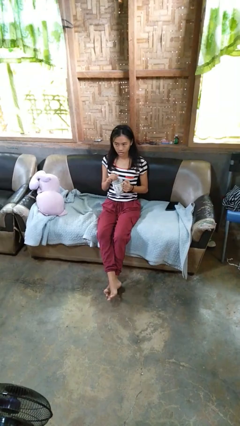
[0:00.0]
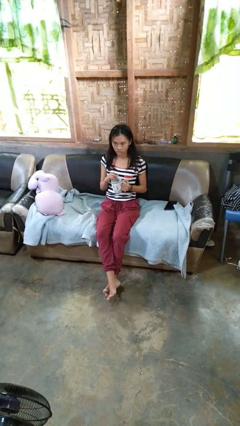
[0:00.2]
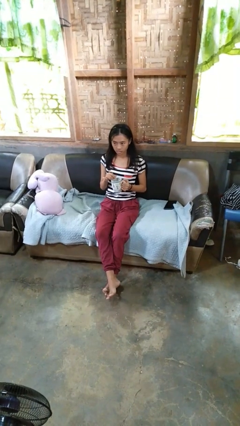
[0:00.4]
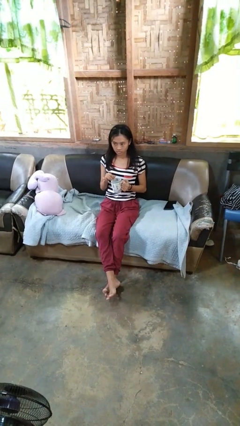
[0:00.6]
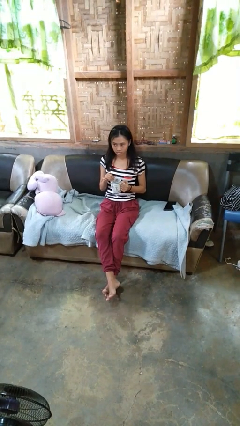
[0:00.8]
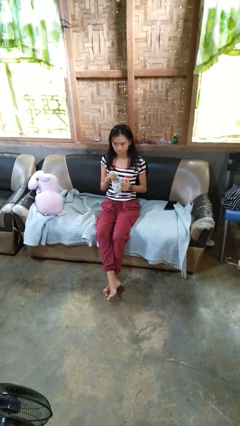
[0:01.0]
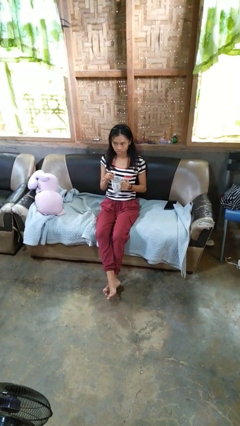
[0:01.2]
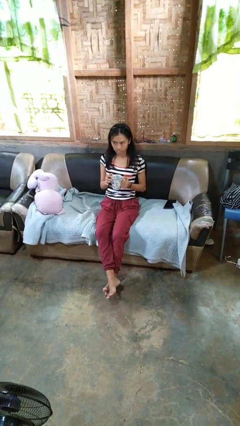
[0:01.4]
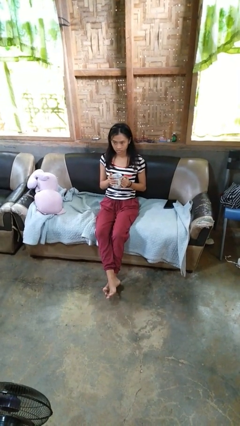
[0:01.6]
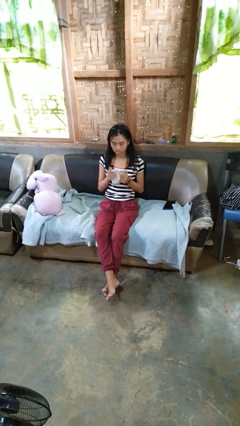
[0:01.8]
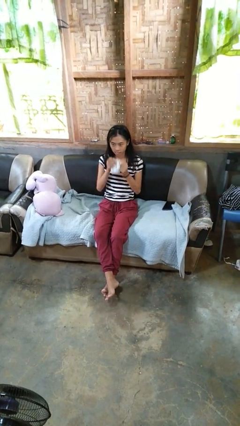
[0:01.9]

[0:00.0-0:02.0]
person stirs mug

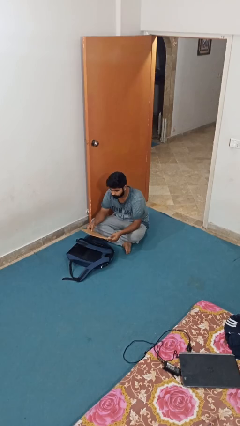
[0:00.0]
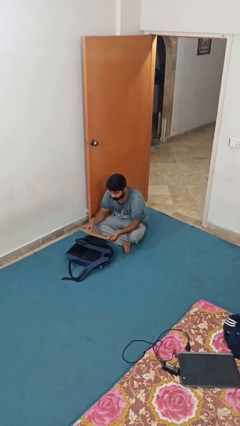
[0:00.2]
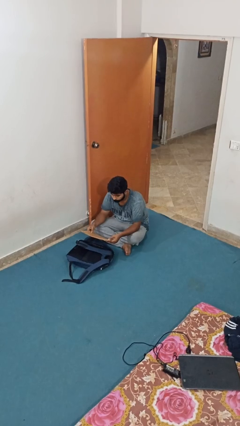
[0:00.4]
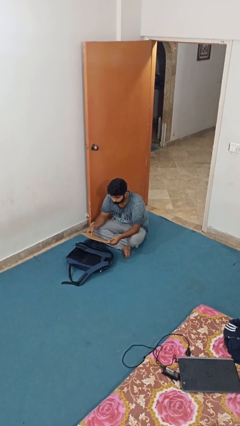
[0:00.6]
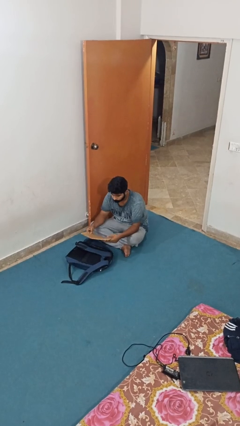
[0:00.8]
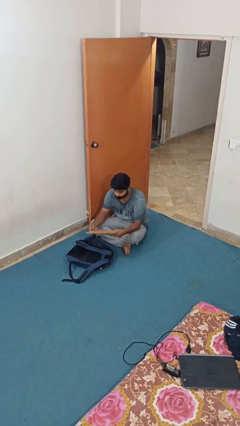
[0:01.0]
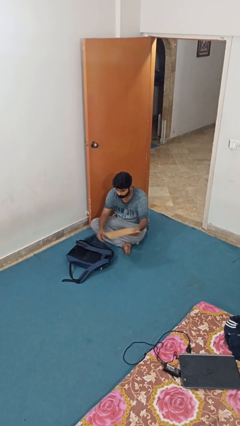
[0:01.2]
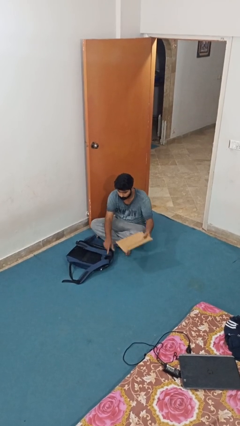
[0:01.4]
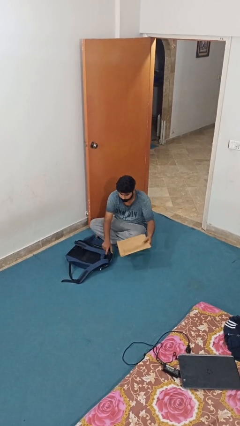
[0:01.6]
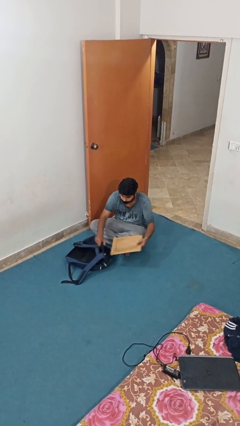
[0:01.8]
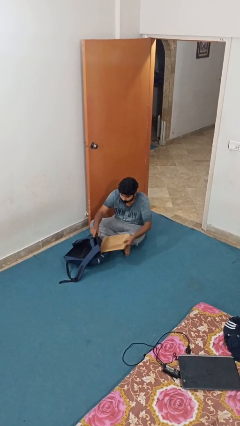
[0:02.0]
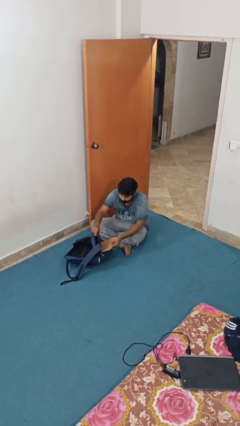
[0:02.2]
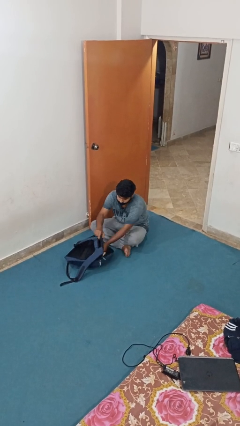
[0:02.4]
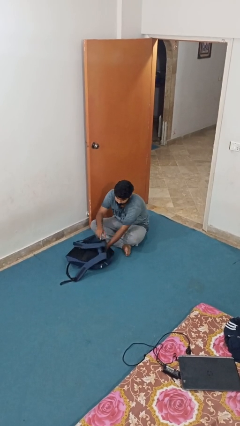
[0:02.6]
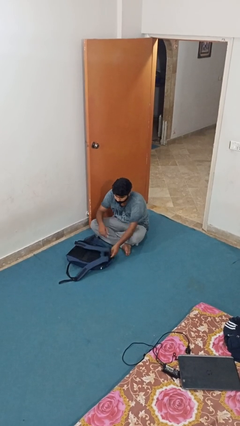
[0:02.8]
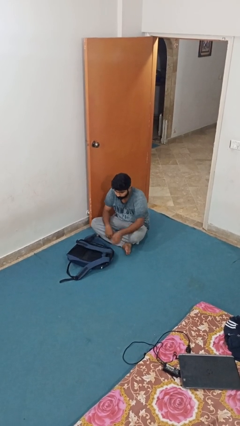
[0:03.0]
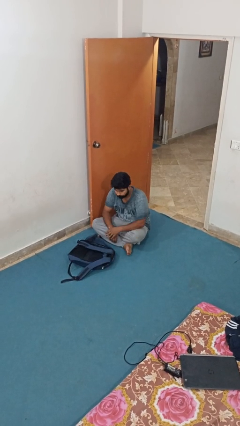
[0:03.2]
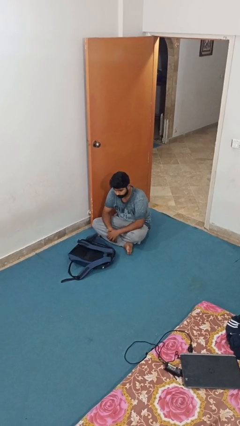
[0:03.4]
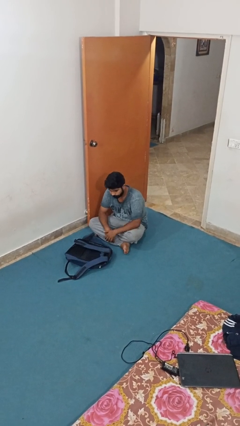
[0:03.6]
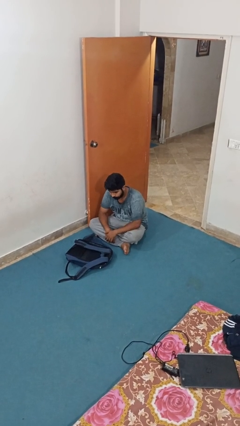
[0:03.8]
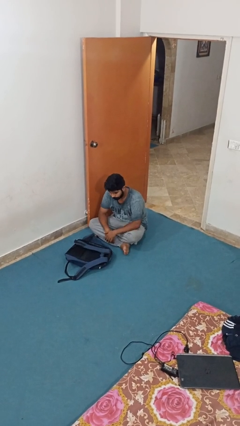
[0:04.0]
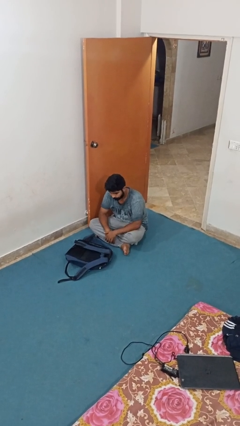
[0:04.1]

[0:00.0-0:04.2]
person puts object into backpack

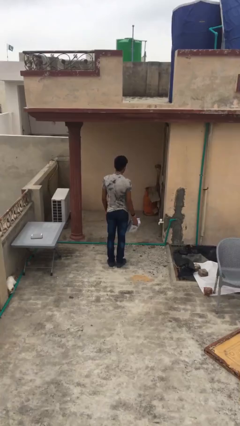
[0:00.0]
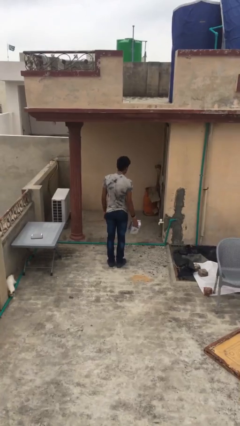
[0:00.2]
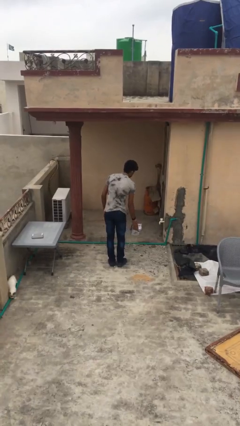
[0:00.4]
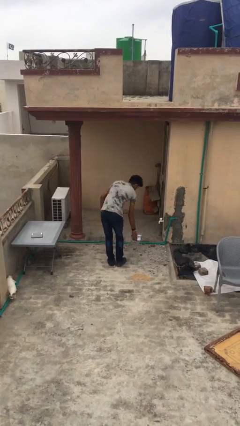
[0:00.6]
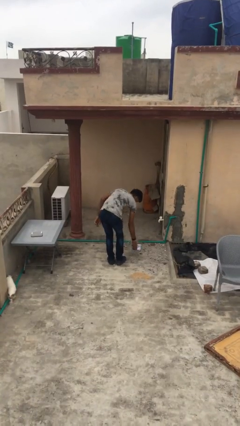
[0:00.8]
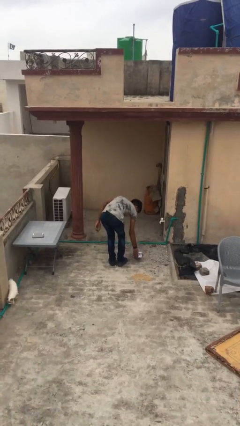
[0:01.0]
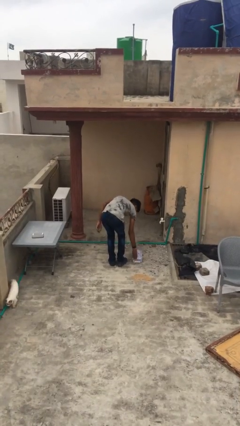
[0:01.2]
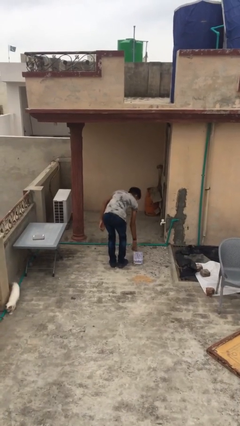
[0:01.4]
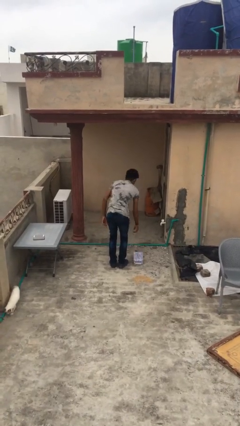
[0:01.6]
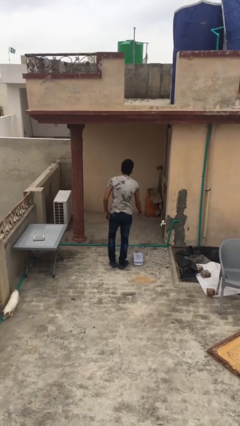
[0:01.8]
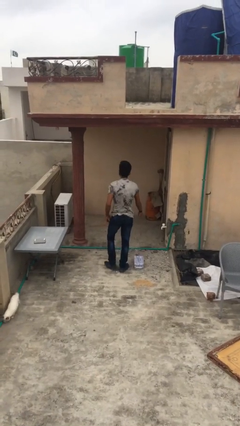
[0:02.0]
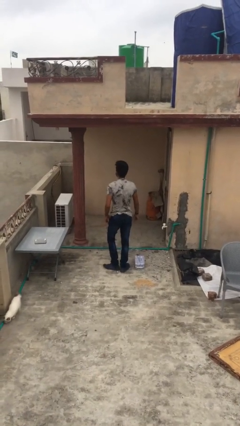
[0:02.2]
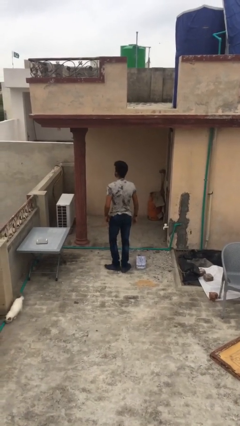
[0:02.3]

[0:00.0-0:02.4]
person puts down object on floor

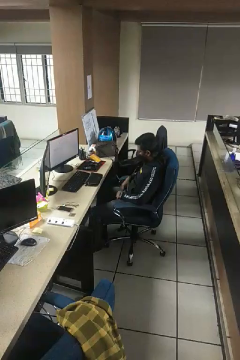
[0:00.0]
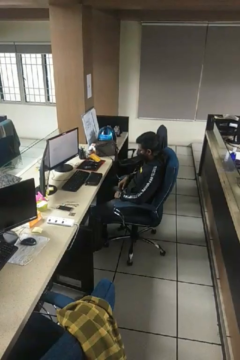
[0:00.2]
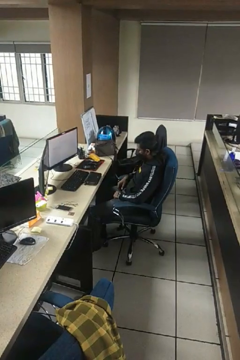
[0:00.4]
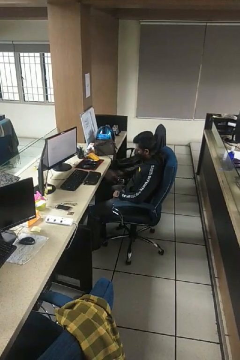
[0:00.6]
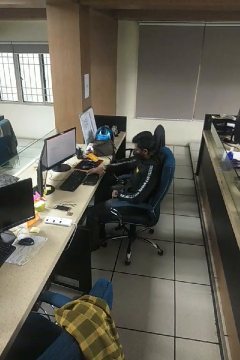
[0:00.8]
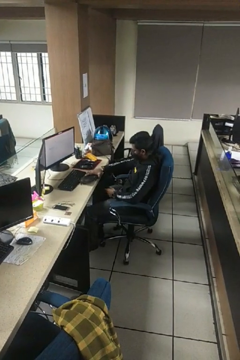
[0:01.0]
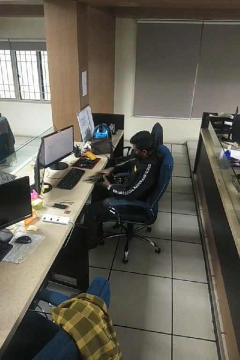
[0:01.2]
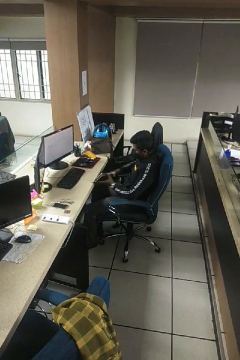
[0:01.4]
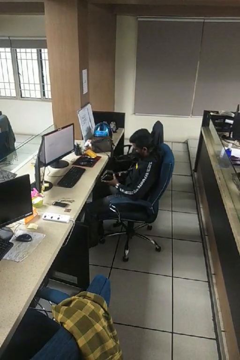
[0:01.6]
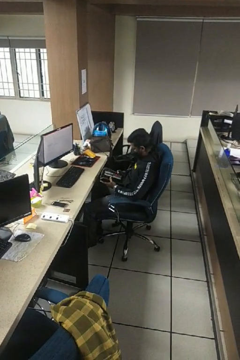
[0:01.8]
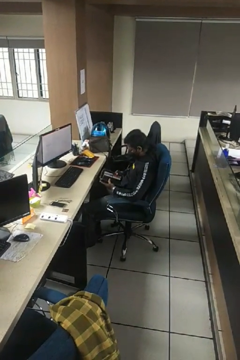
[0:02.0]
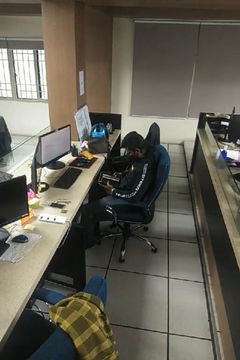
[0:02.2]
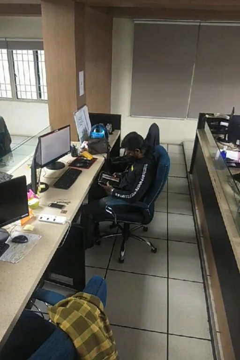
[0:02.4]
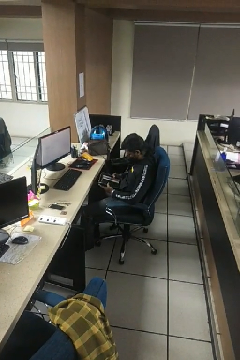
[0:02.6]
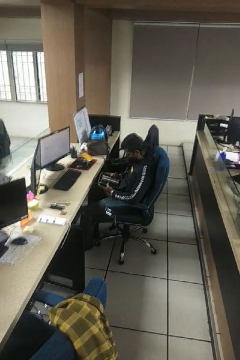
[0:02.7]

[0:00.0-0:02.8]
person searches in purse

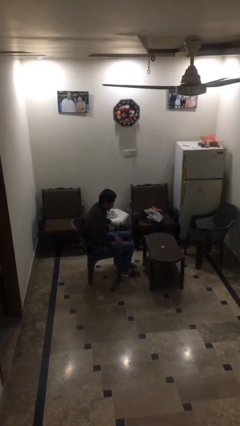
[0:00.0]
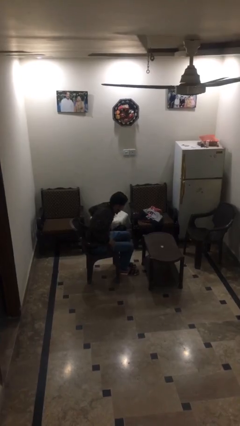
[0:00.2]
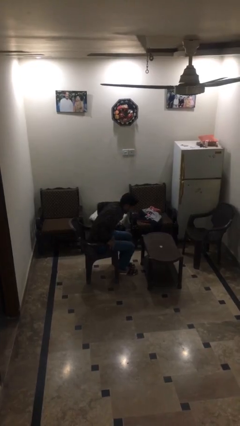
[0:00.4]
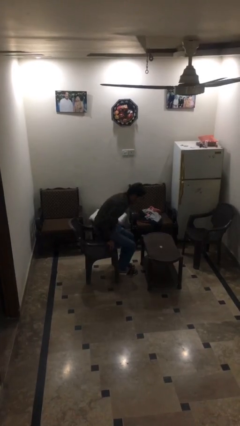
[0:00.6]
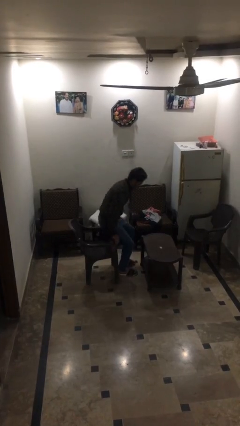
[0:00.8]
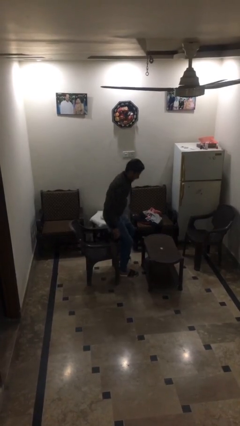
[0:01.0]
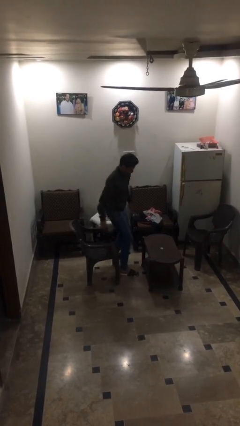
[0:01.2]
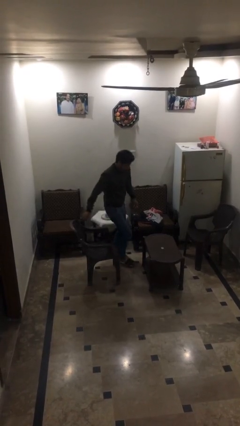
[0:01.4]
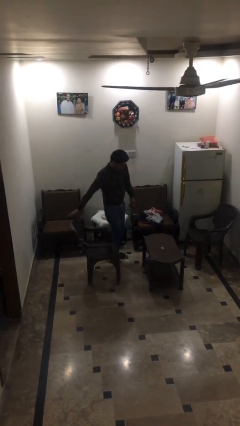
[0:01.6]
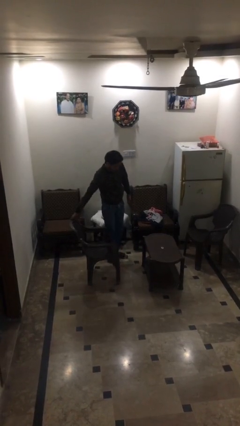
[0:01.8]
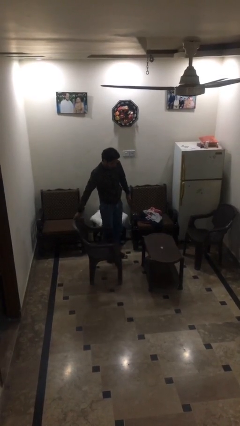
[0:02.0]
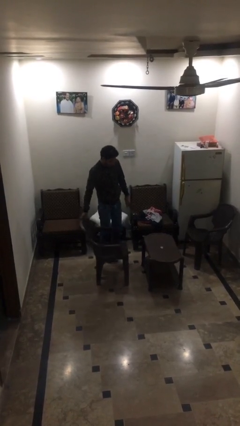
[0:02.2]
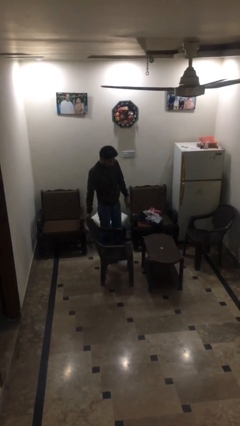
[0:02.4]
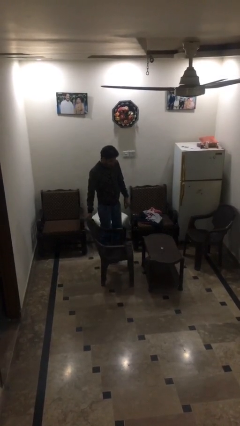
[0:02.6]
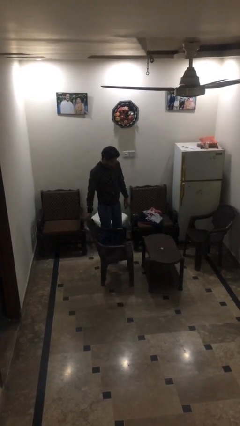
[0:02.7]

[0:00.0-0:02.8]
person stands up

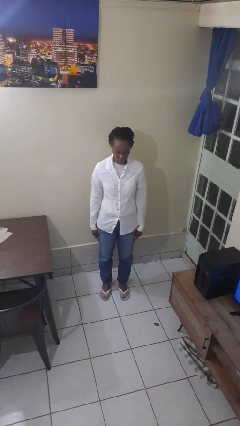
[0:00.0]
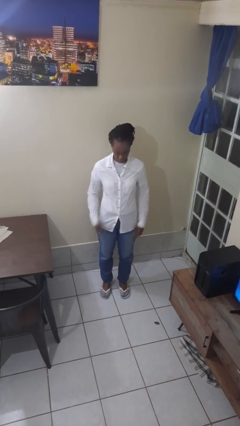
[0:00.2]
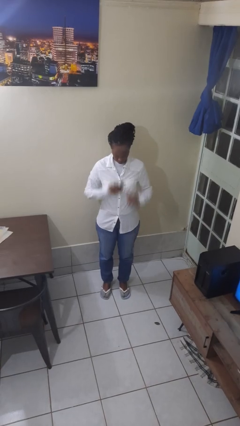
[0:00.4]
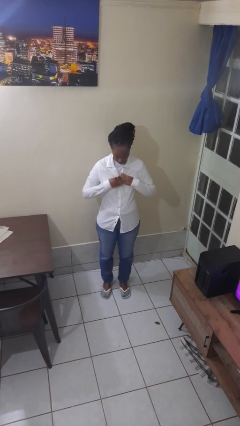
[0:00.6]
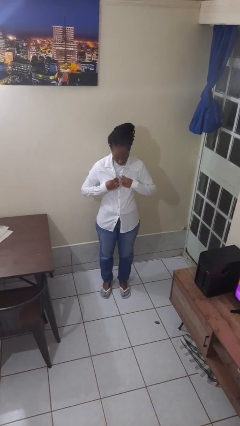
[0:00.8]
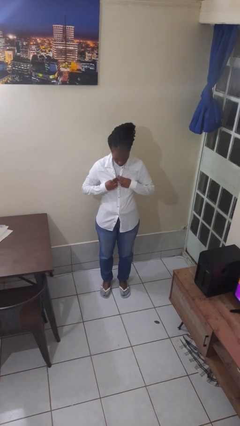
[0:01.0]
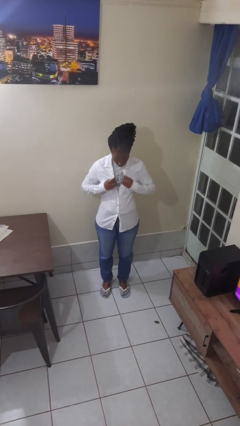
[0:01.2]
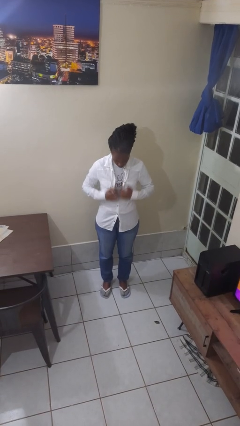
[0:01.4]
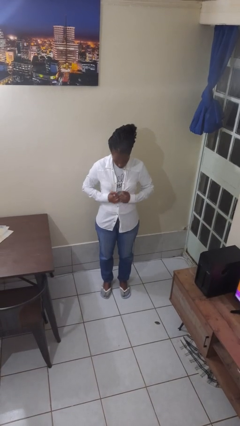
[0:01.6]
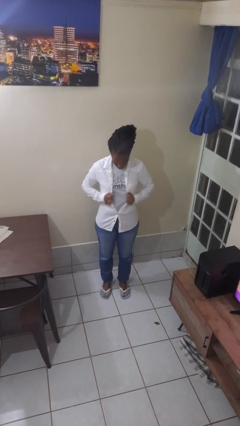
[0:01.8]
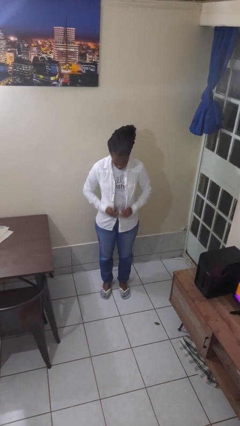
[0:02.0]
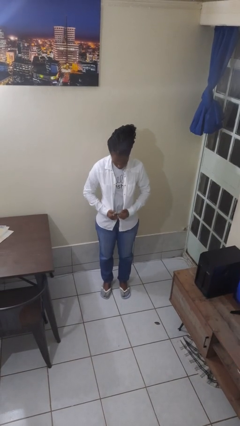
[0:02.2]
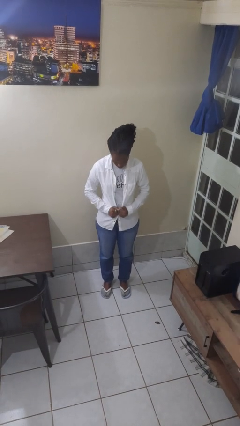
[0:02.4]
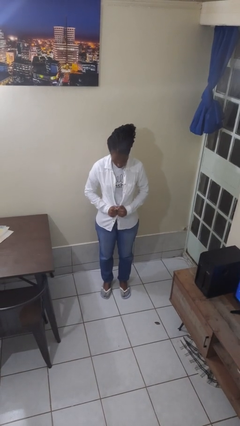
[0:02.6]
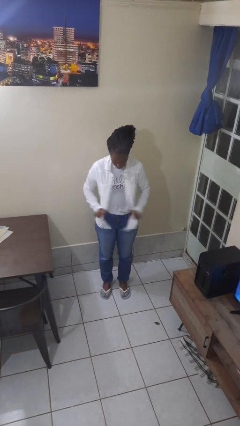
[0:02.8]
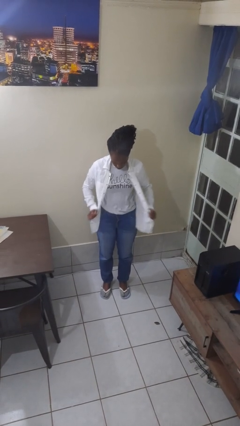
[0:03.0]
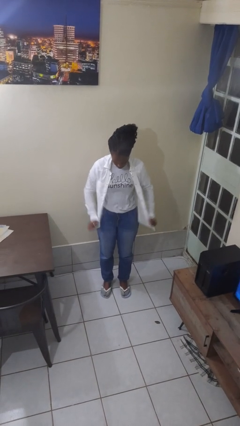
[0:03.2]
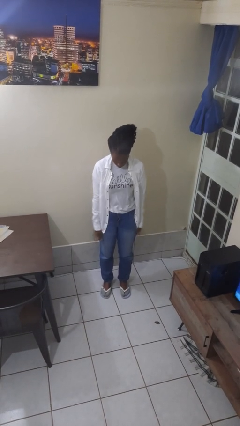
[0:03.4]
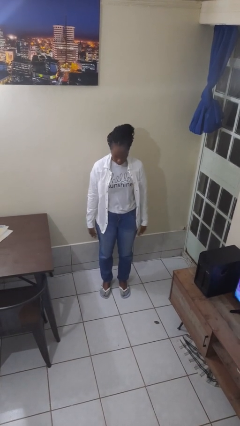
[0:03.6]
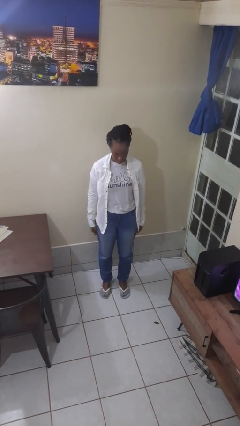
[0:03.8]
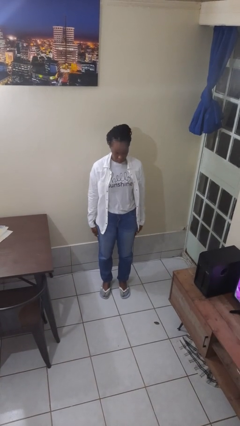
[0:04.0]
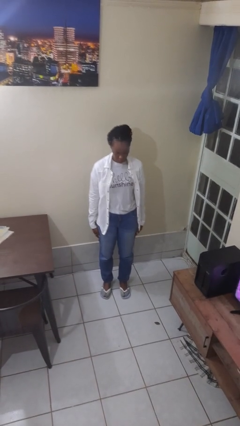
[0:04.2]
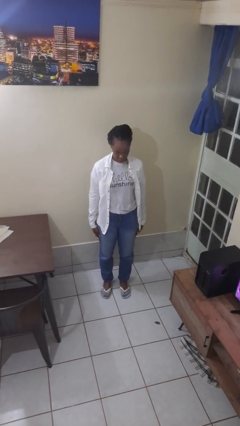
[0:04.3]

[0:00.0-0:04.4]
person unbuttons shirt
